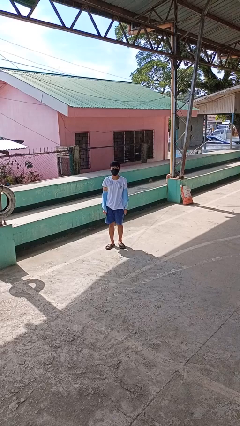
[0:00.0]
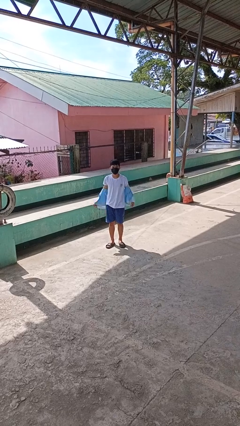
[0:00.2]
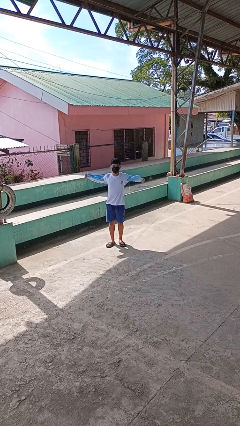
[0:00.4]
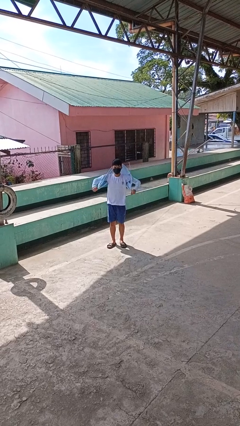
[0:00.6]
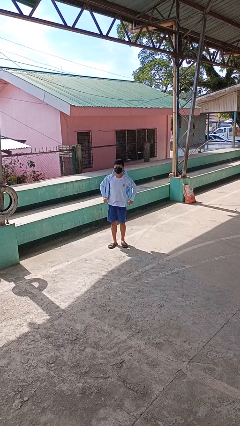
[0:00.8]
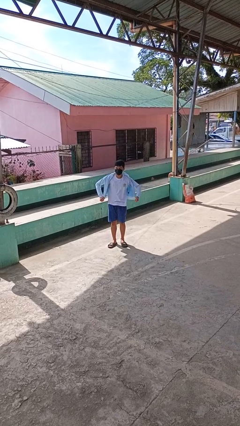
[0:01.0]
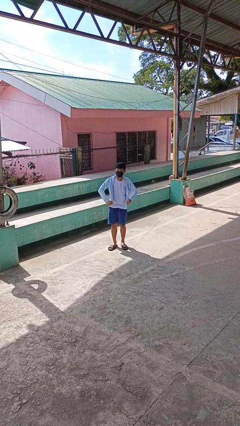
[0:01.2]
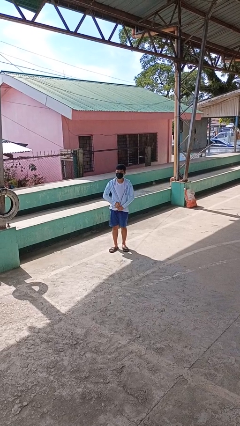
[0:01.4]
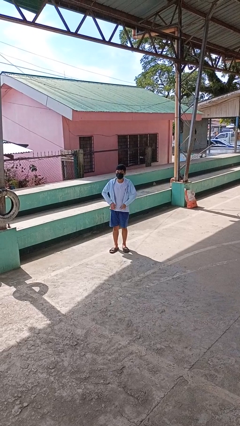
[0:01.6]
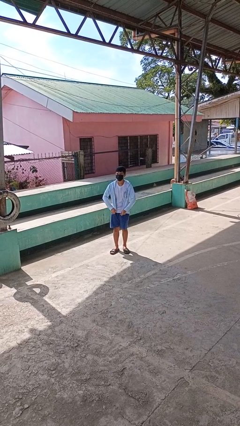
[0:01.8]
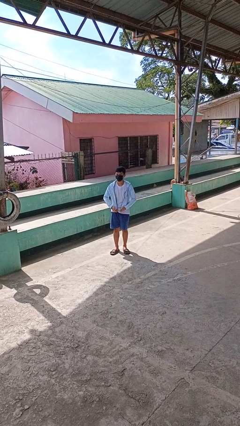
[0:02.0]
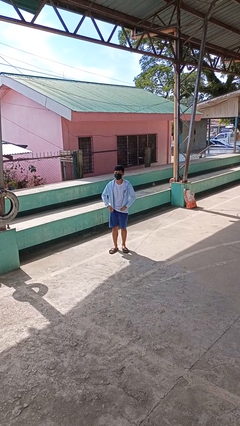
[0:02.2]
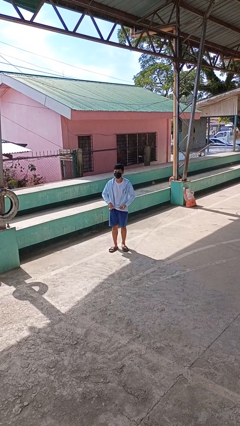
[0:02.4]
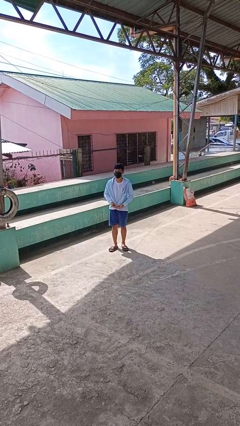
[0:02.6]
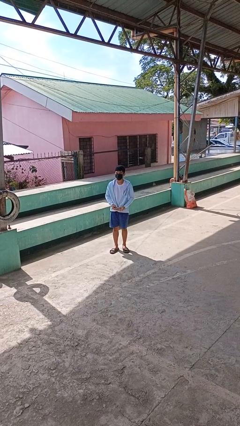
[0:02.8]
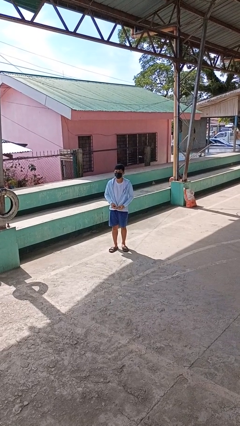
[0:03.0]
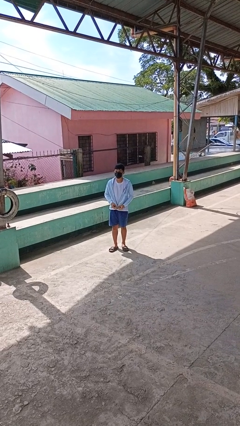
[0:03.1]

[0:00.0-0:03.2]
person puts on jacket

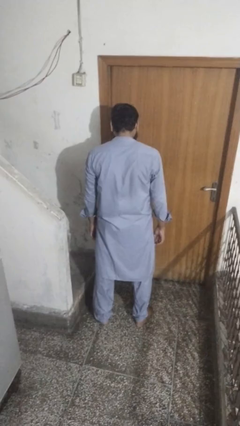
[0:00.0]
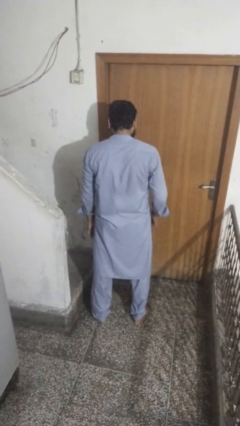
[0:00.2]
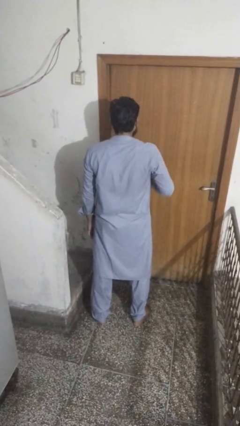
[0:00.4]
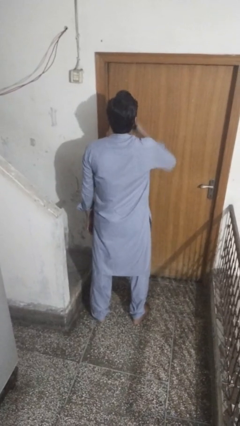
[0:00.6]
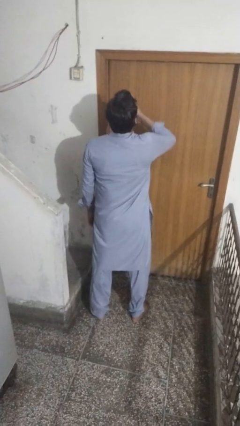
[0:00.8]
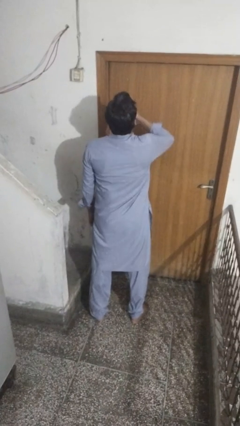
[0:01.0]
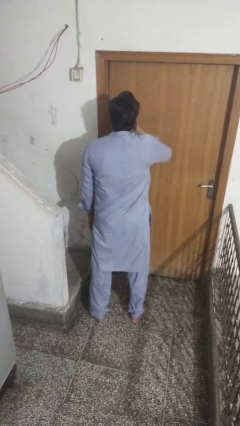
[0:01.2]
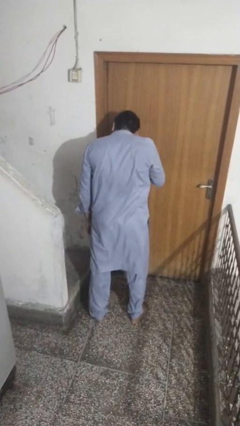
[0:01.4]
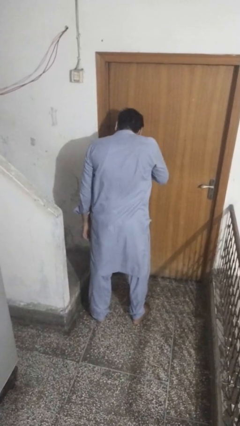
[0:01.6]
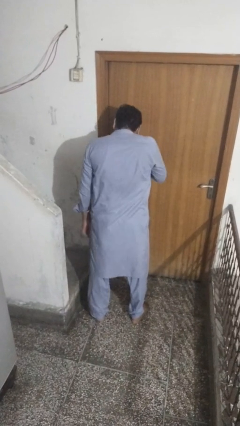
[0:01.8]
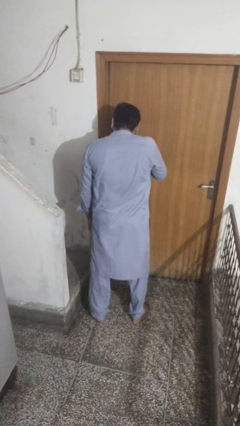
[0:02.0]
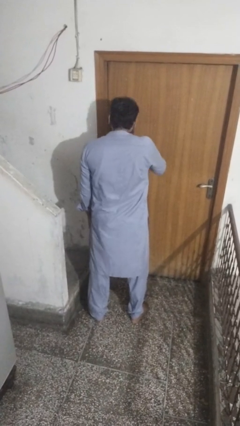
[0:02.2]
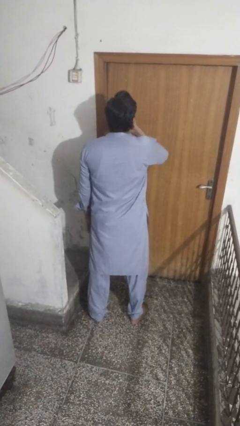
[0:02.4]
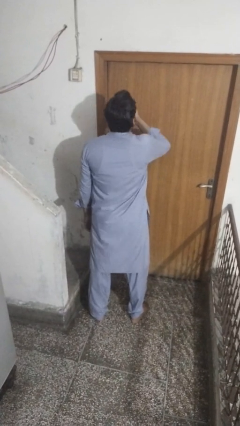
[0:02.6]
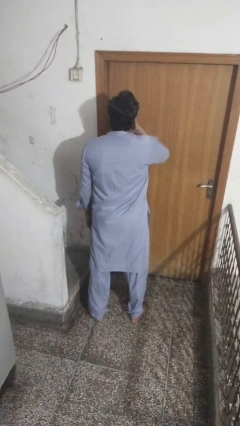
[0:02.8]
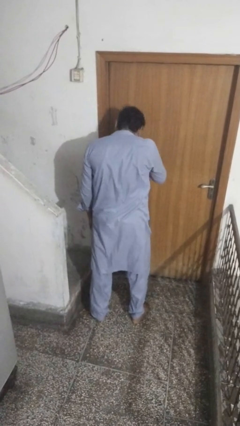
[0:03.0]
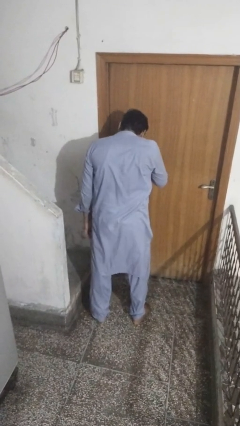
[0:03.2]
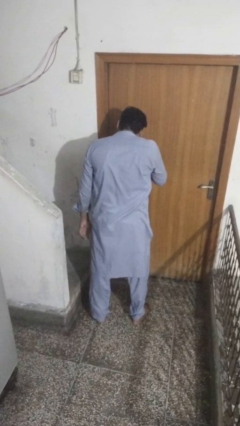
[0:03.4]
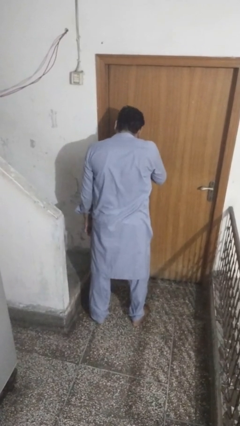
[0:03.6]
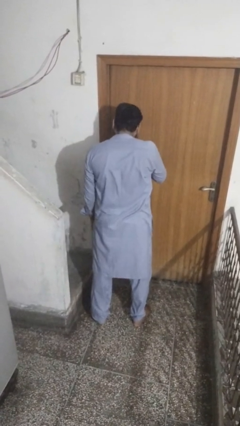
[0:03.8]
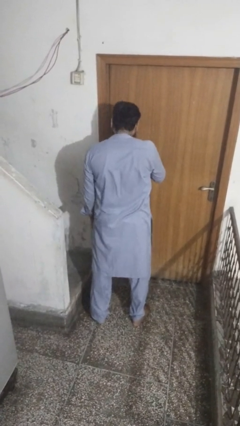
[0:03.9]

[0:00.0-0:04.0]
person sneezes into hand

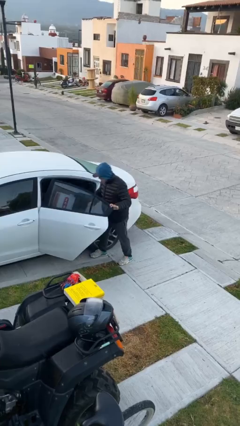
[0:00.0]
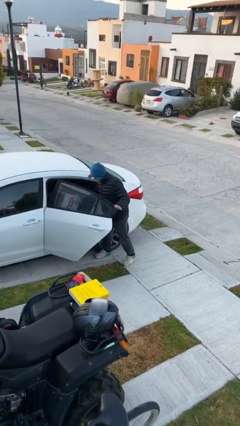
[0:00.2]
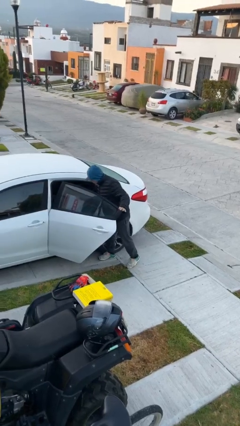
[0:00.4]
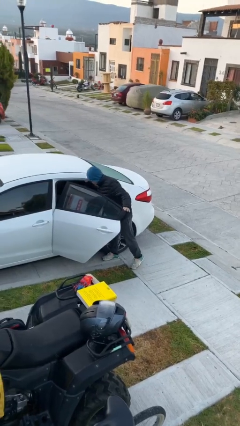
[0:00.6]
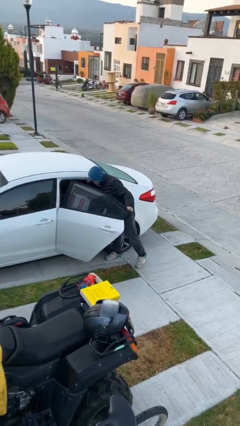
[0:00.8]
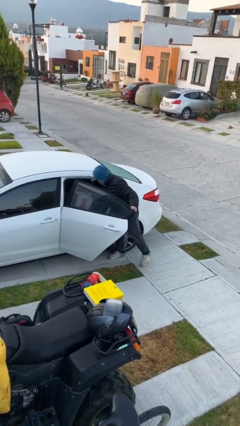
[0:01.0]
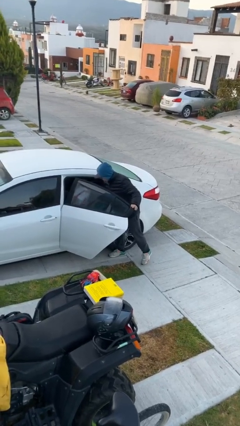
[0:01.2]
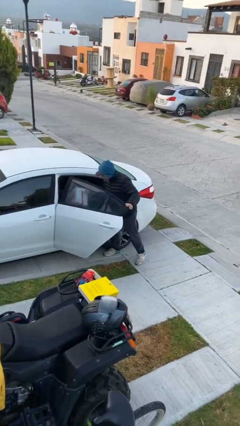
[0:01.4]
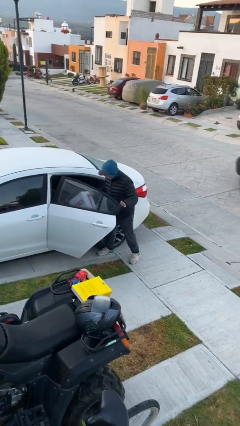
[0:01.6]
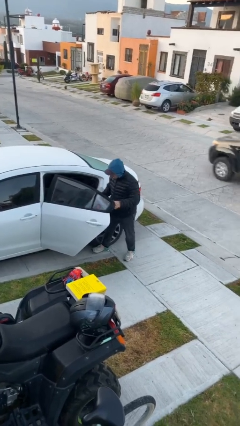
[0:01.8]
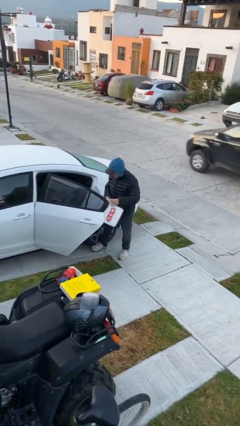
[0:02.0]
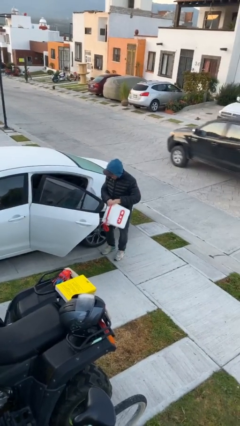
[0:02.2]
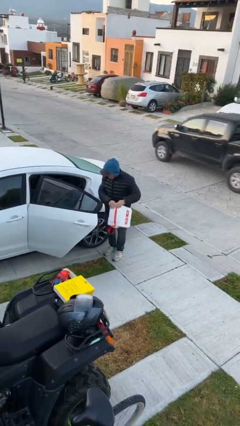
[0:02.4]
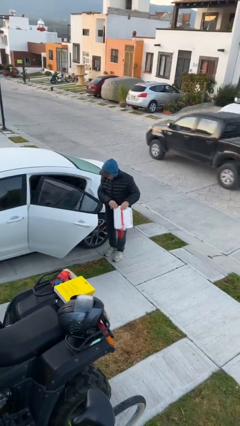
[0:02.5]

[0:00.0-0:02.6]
person unloads car

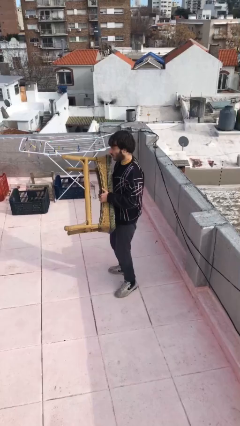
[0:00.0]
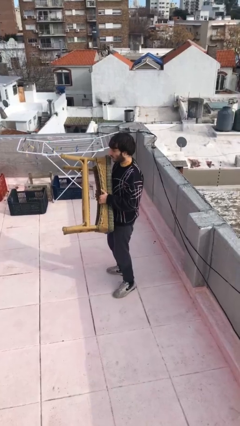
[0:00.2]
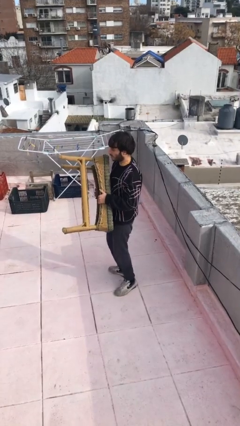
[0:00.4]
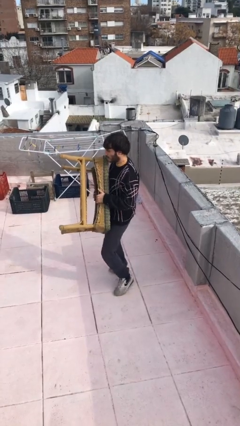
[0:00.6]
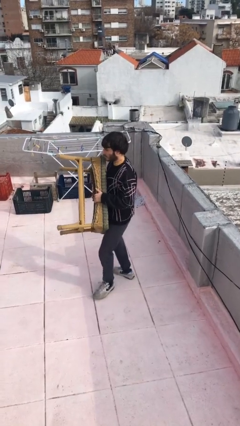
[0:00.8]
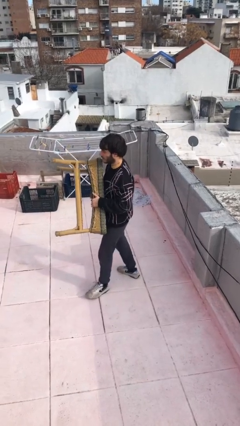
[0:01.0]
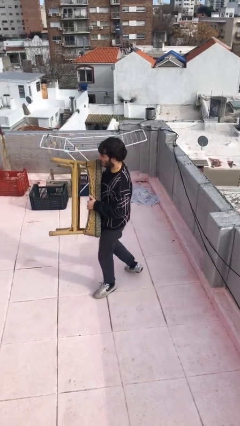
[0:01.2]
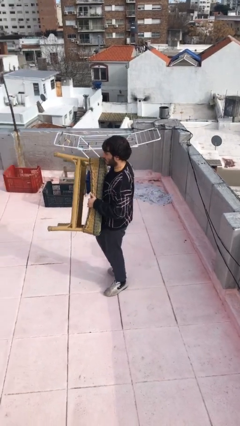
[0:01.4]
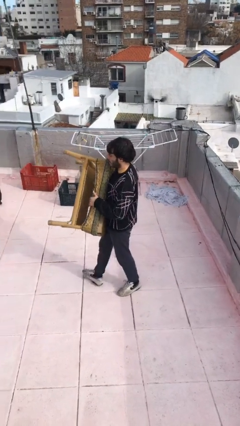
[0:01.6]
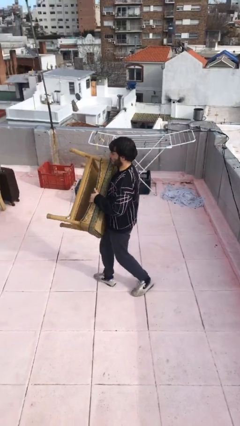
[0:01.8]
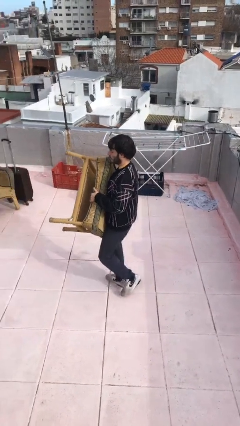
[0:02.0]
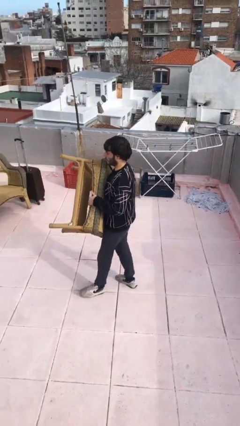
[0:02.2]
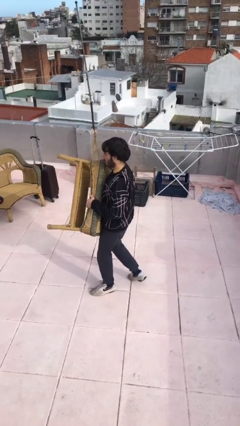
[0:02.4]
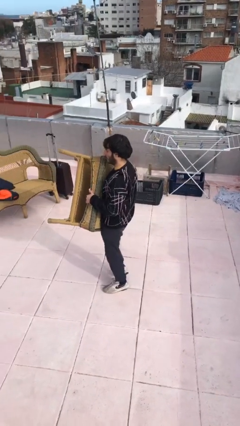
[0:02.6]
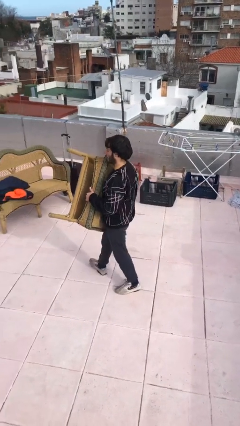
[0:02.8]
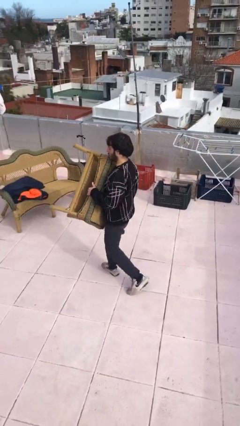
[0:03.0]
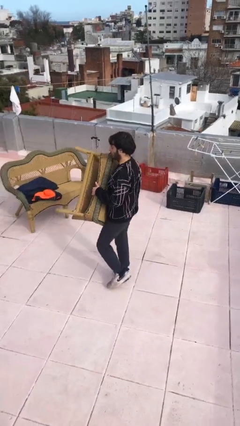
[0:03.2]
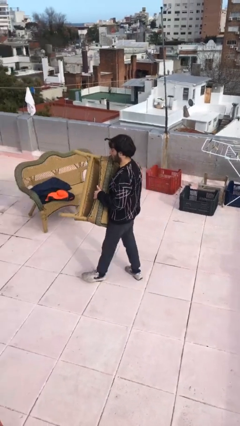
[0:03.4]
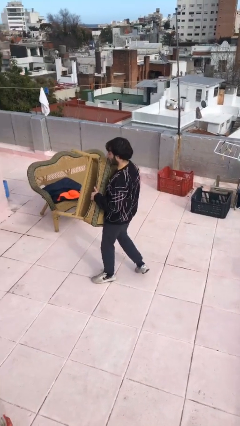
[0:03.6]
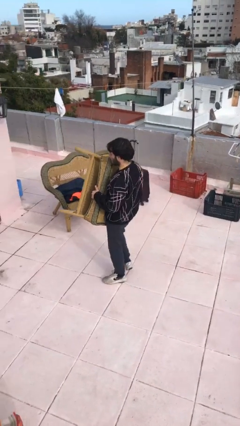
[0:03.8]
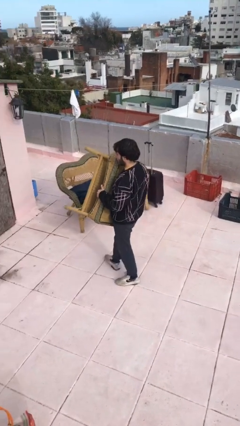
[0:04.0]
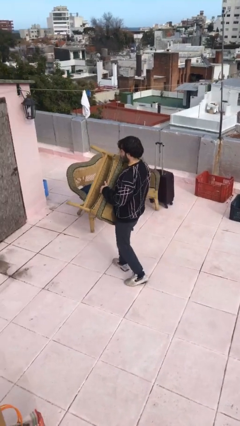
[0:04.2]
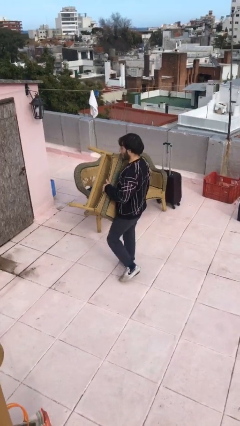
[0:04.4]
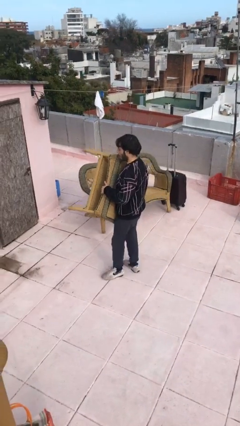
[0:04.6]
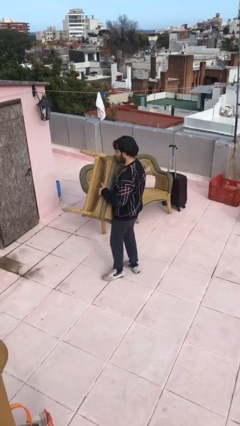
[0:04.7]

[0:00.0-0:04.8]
person carries furniture

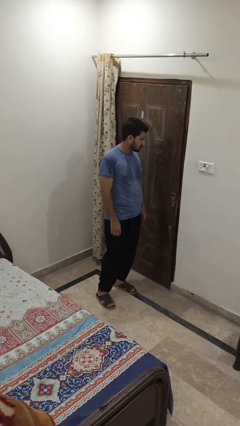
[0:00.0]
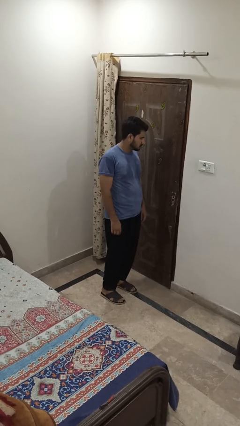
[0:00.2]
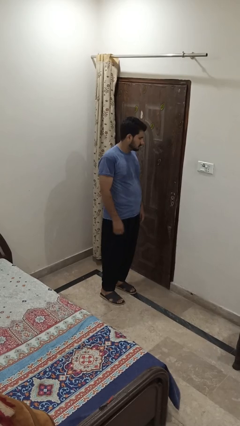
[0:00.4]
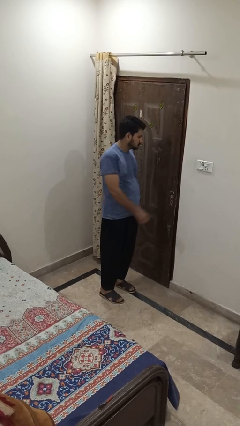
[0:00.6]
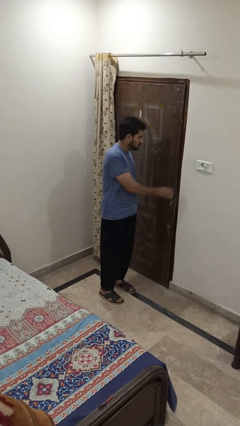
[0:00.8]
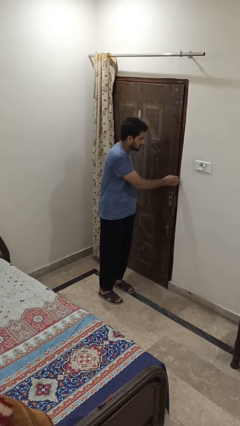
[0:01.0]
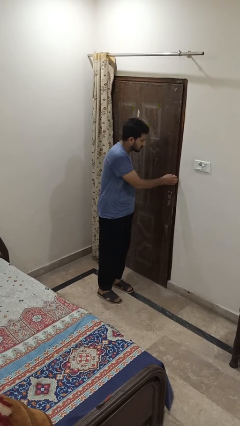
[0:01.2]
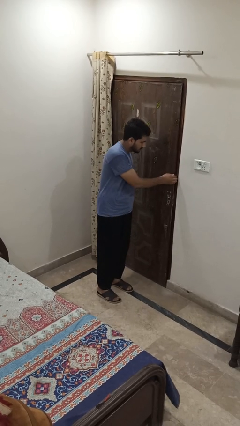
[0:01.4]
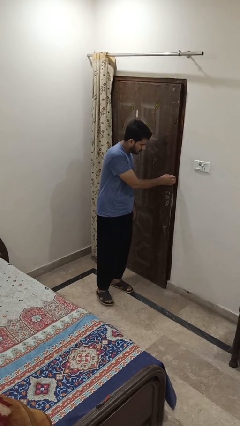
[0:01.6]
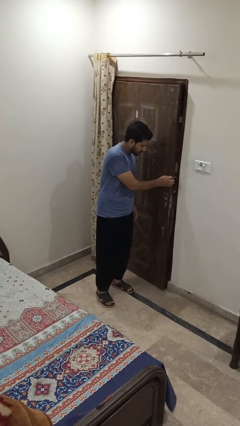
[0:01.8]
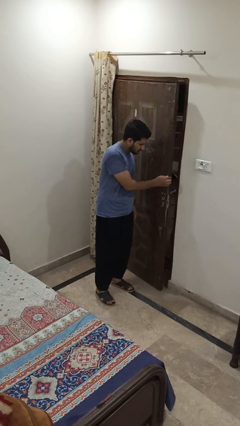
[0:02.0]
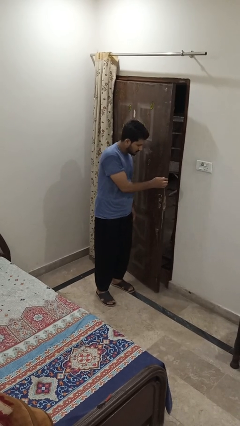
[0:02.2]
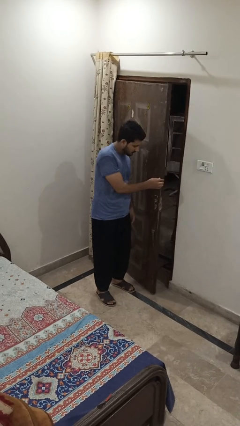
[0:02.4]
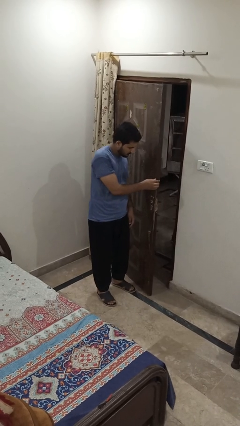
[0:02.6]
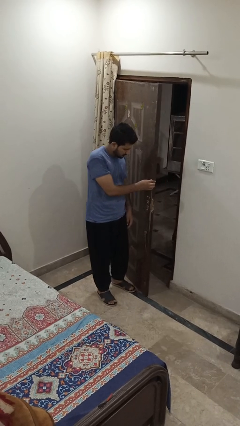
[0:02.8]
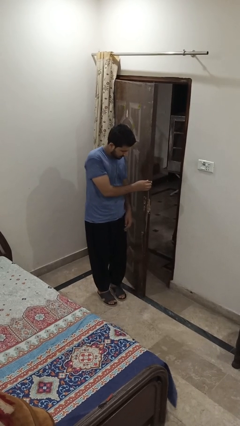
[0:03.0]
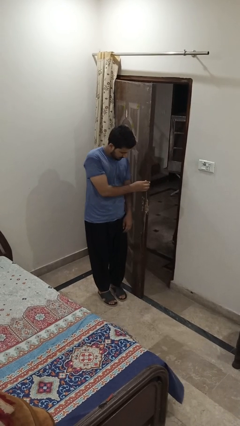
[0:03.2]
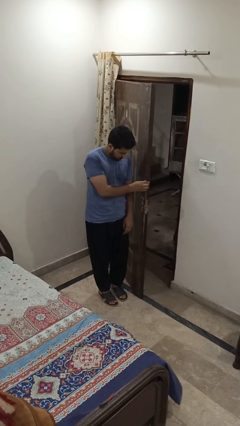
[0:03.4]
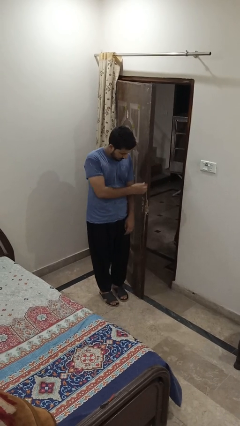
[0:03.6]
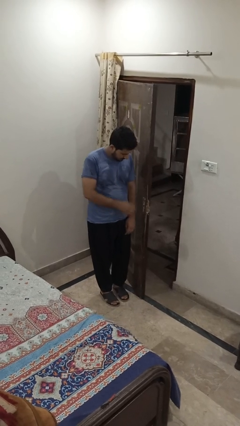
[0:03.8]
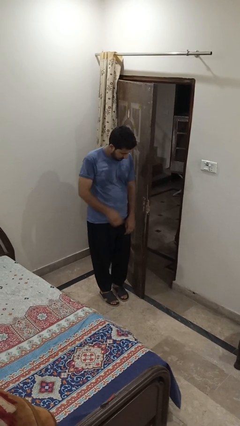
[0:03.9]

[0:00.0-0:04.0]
person opens facility door
